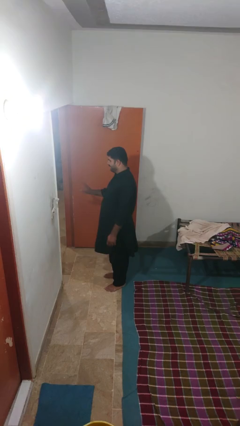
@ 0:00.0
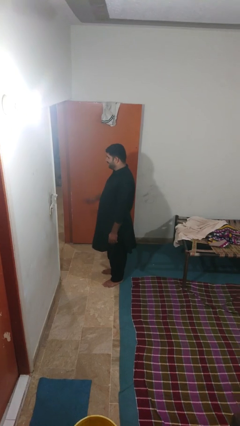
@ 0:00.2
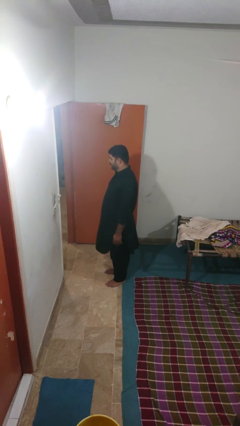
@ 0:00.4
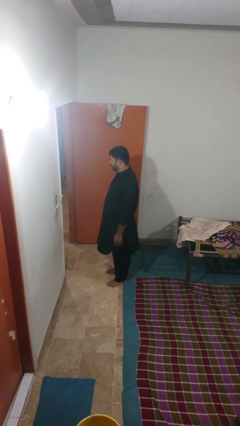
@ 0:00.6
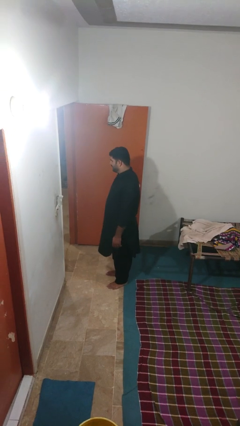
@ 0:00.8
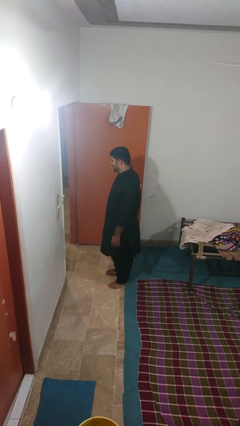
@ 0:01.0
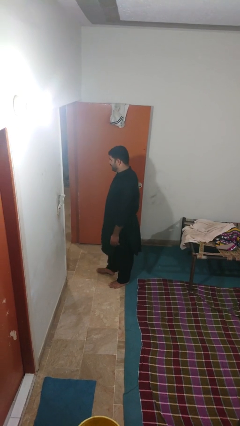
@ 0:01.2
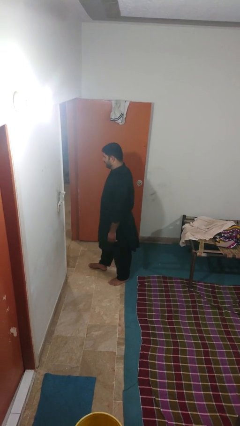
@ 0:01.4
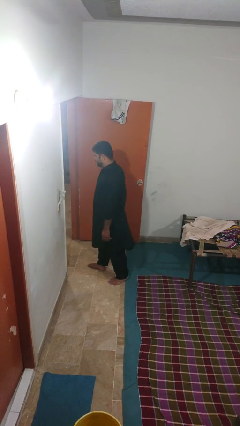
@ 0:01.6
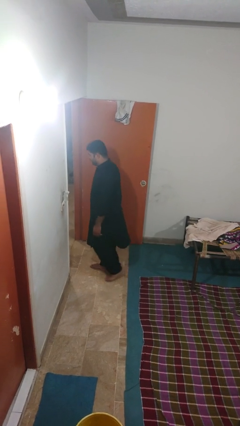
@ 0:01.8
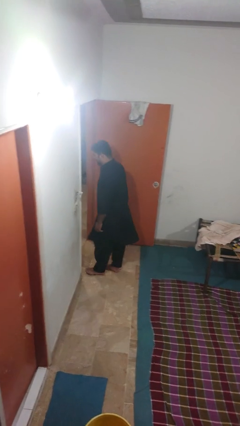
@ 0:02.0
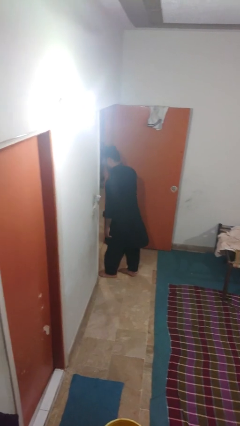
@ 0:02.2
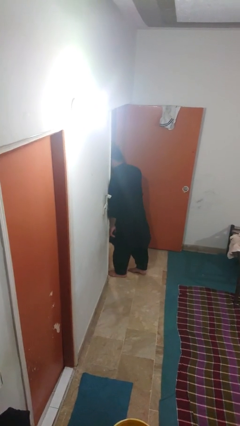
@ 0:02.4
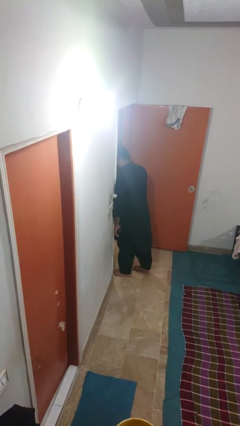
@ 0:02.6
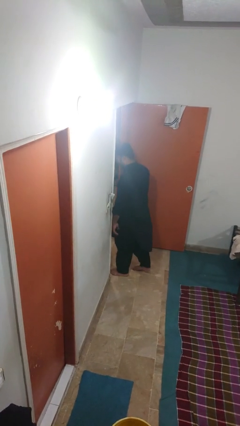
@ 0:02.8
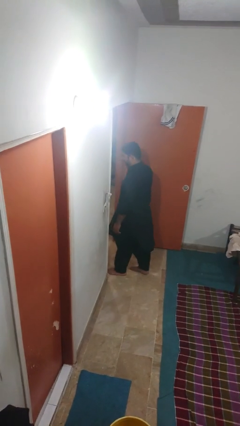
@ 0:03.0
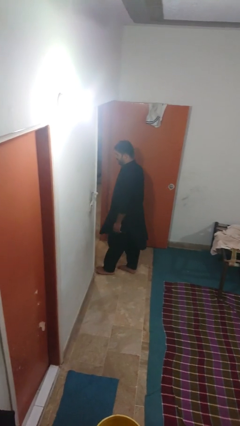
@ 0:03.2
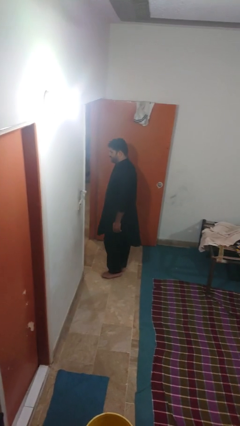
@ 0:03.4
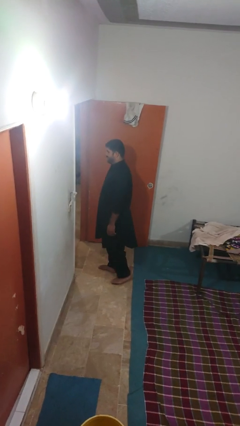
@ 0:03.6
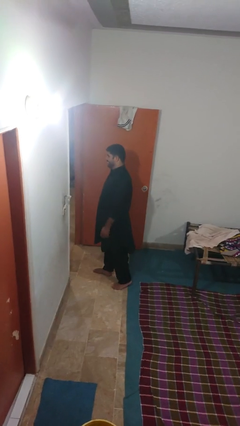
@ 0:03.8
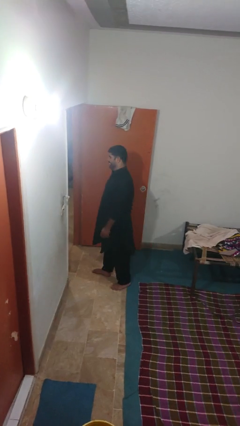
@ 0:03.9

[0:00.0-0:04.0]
person bumps into wall

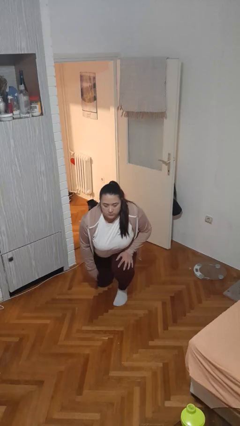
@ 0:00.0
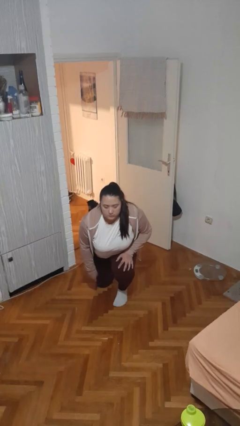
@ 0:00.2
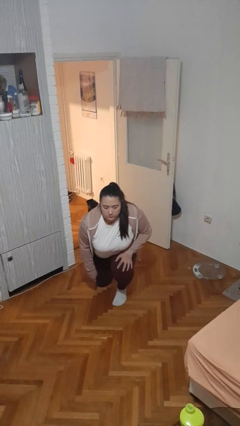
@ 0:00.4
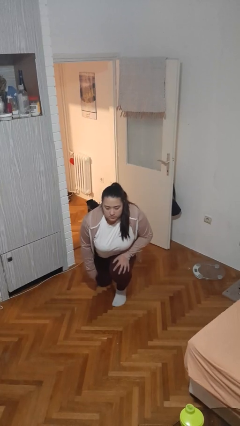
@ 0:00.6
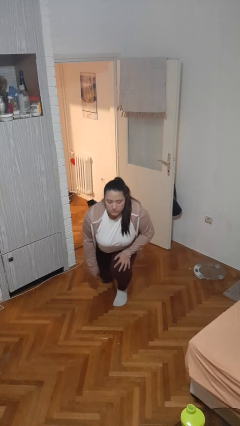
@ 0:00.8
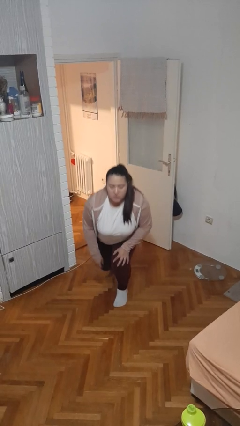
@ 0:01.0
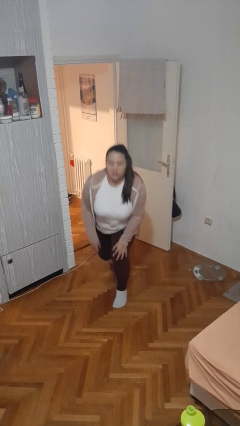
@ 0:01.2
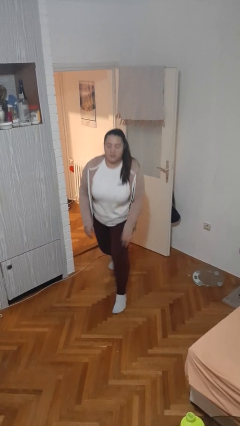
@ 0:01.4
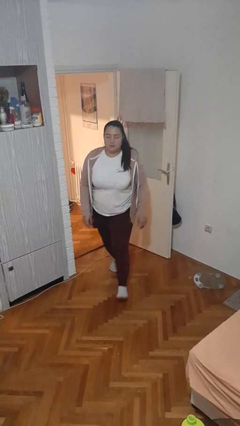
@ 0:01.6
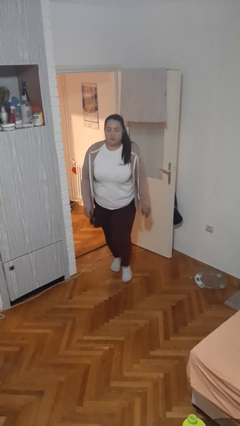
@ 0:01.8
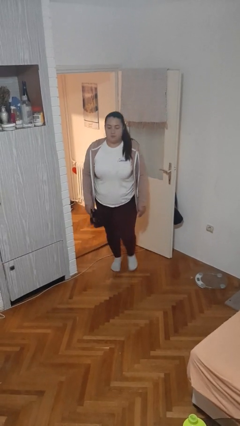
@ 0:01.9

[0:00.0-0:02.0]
person stands up from floor

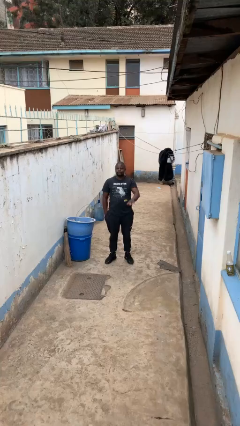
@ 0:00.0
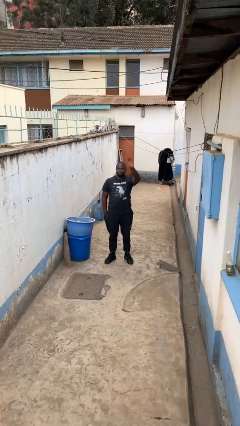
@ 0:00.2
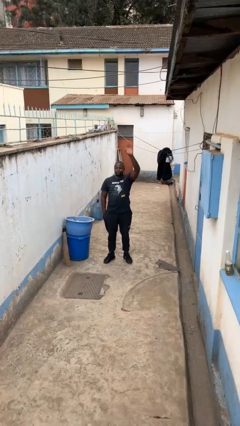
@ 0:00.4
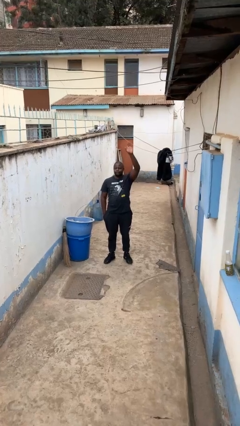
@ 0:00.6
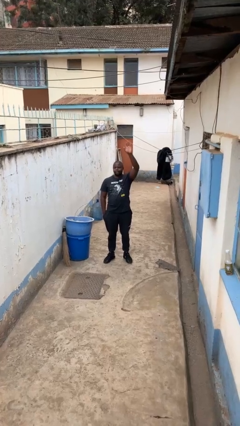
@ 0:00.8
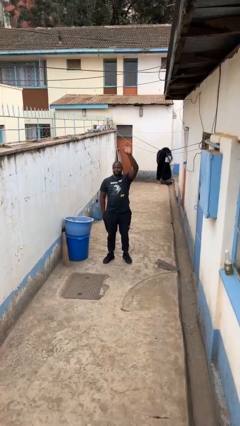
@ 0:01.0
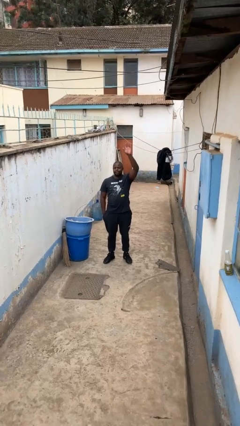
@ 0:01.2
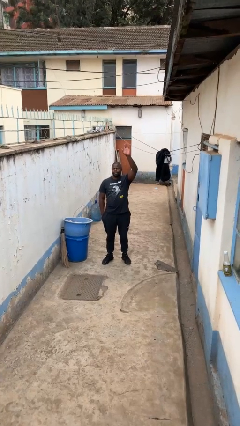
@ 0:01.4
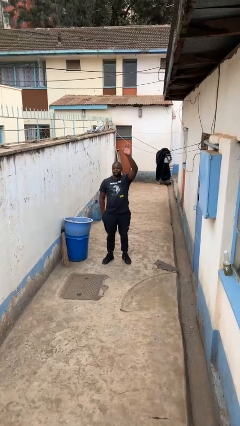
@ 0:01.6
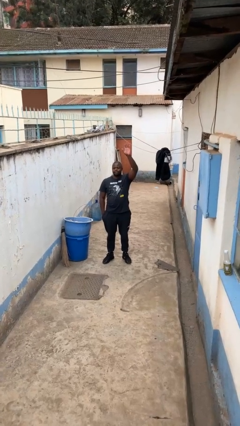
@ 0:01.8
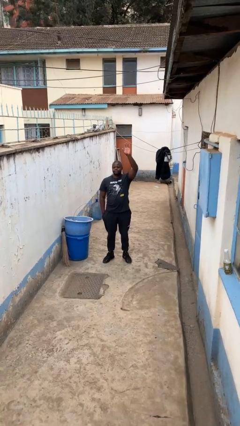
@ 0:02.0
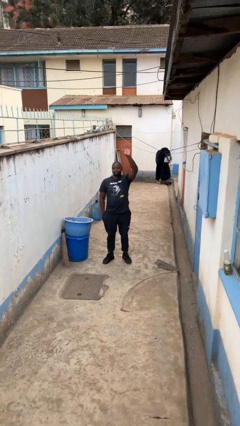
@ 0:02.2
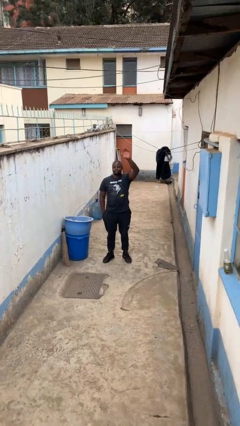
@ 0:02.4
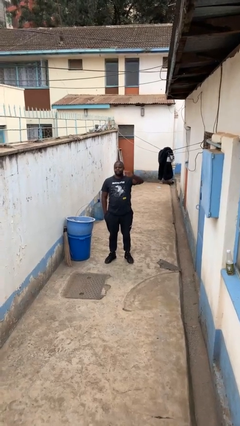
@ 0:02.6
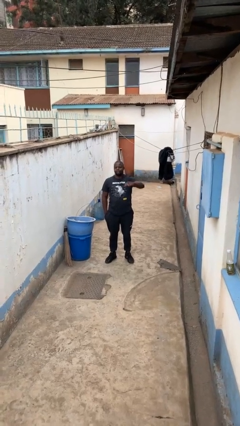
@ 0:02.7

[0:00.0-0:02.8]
person gestures raise hand

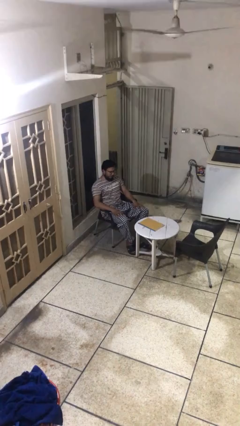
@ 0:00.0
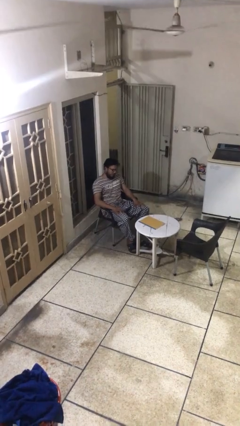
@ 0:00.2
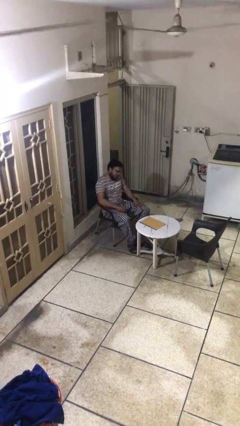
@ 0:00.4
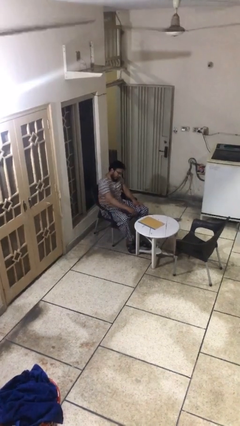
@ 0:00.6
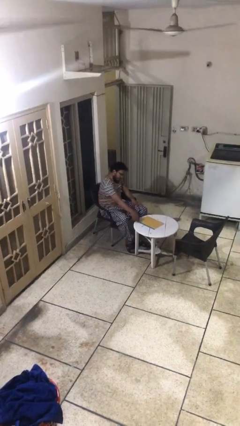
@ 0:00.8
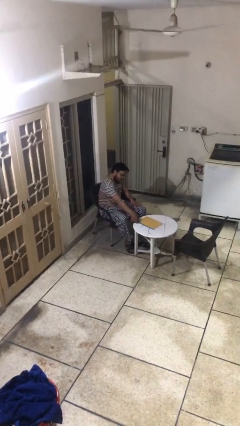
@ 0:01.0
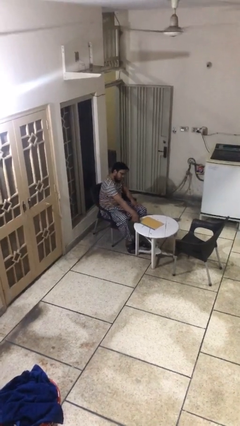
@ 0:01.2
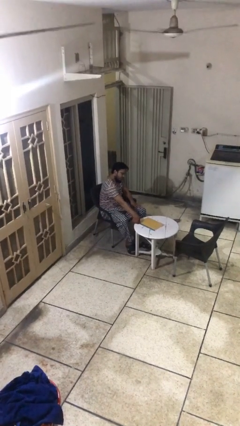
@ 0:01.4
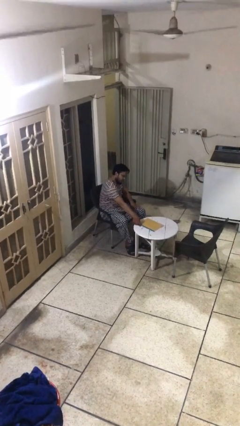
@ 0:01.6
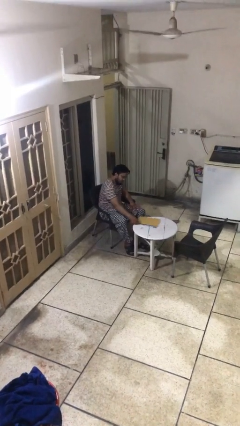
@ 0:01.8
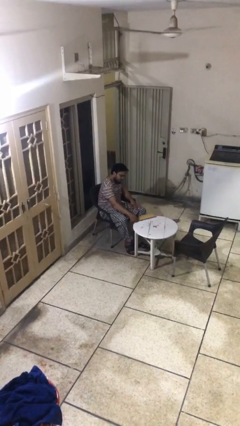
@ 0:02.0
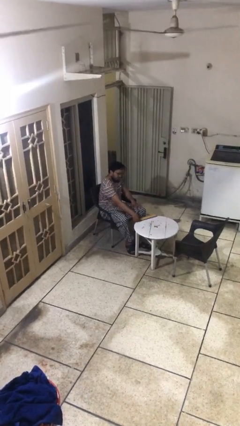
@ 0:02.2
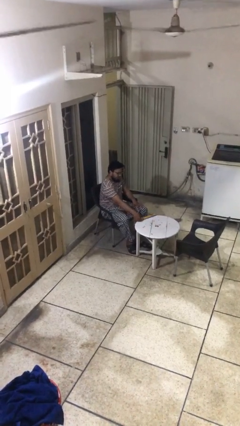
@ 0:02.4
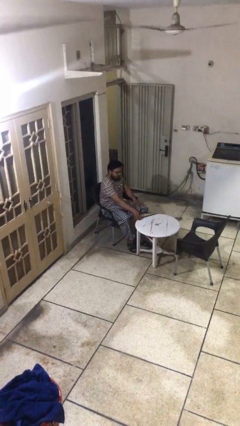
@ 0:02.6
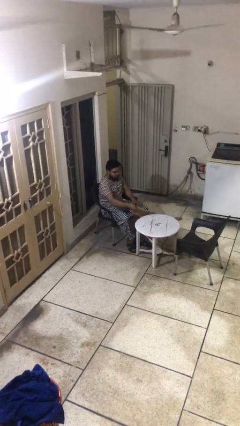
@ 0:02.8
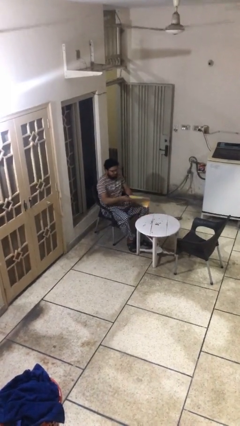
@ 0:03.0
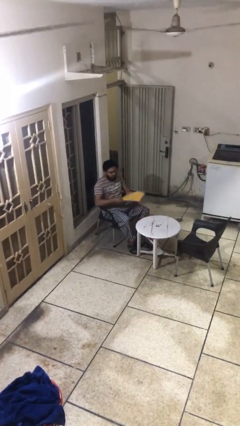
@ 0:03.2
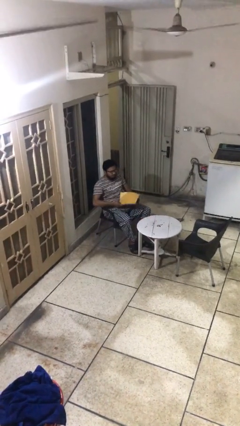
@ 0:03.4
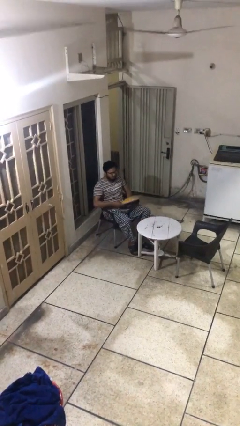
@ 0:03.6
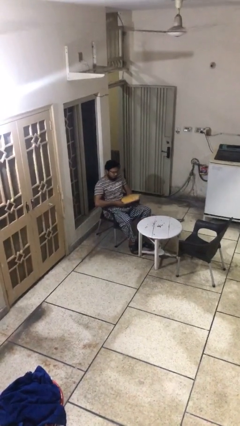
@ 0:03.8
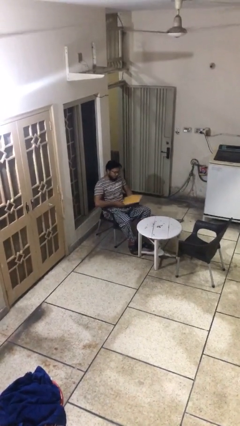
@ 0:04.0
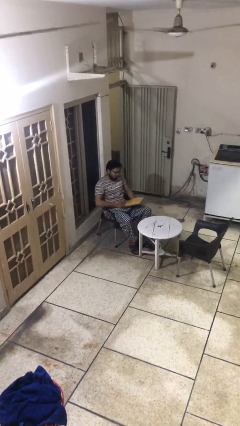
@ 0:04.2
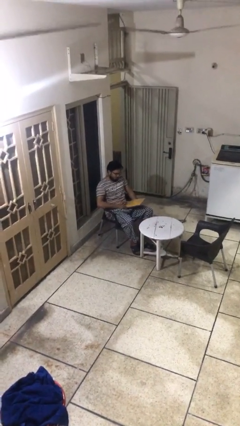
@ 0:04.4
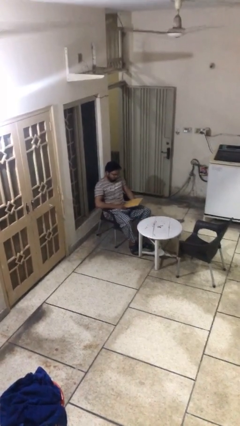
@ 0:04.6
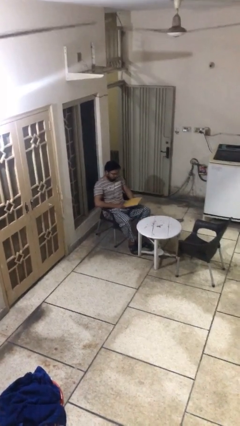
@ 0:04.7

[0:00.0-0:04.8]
person picks up object from table

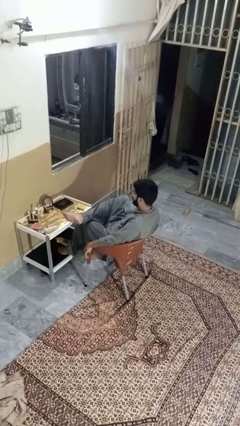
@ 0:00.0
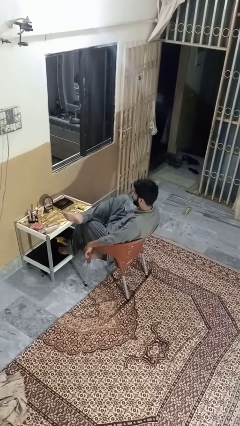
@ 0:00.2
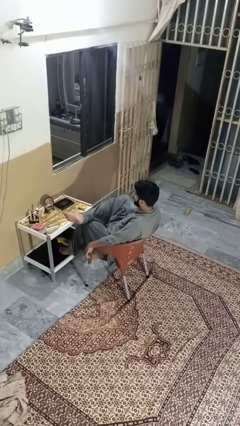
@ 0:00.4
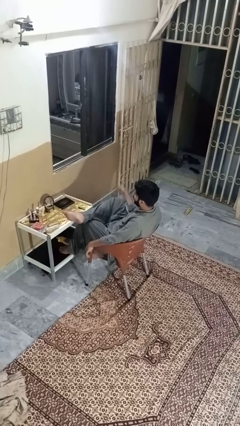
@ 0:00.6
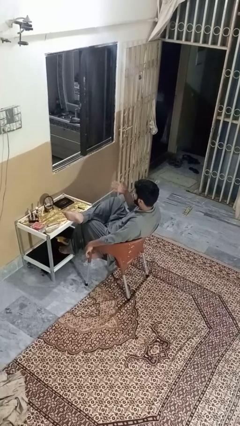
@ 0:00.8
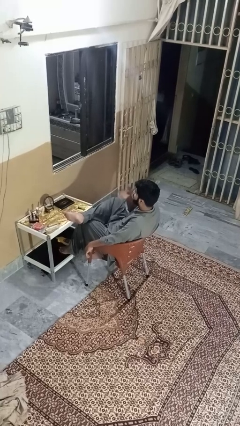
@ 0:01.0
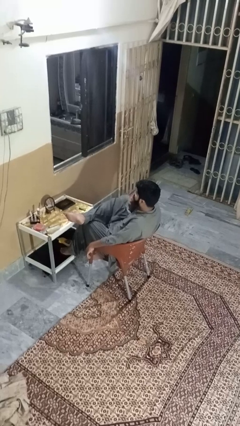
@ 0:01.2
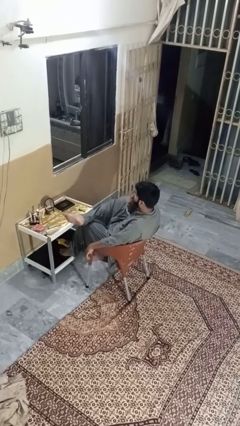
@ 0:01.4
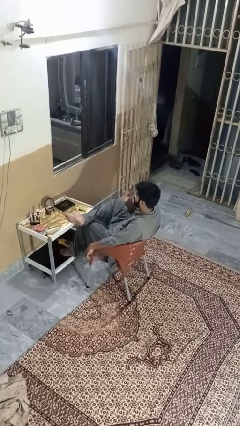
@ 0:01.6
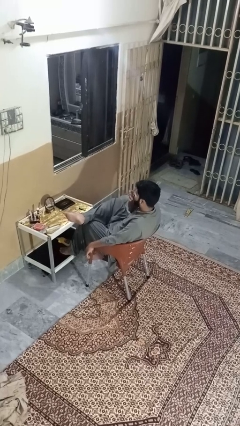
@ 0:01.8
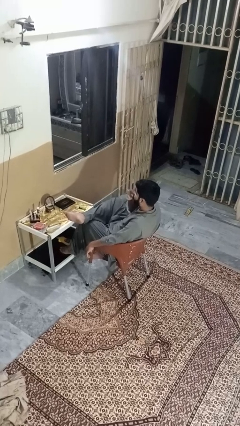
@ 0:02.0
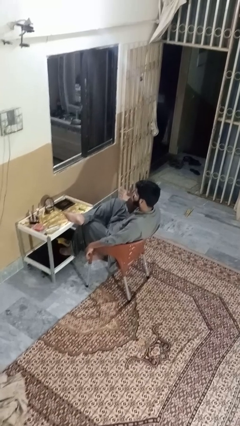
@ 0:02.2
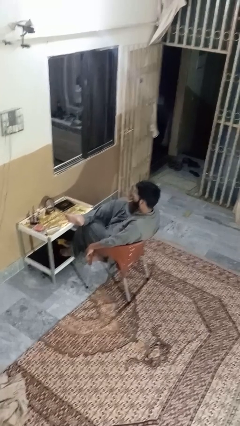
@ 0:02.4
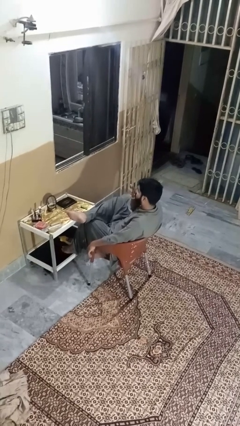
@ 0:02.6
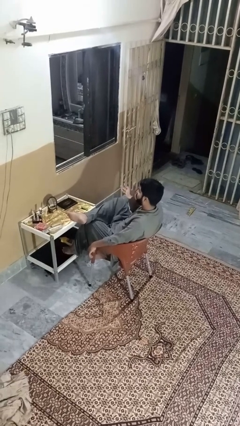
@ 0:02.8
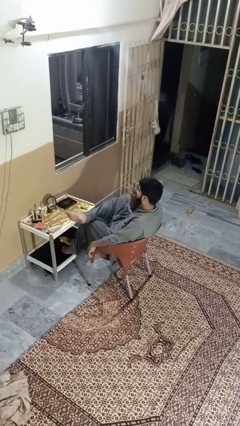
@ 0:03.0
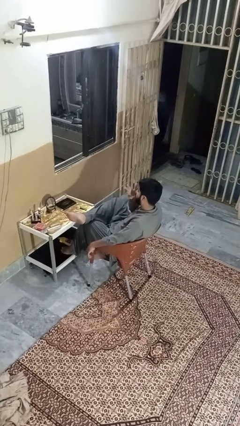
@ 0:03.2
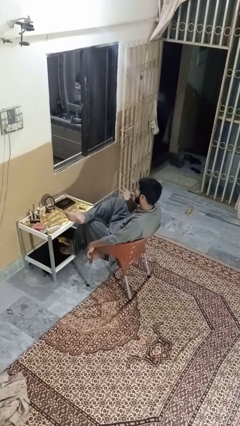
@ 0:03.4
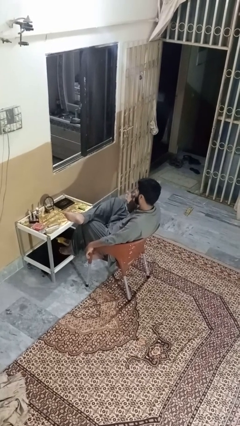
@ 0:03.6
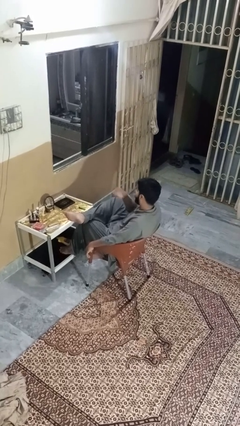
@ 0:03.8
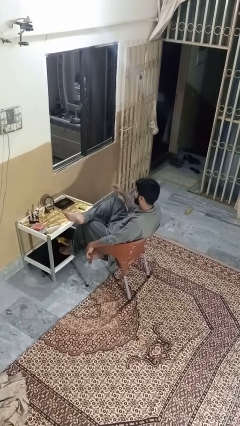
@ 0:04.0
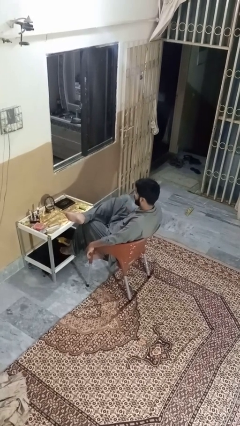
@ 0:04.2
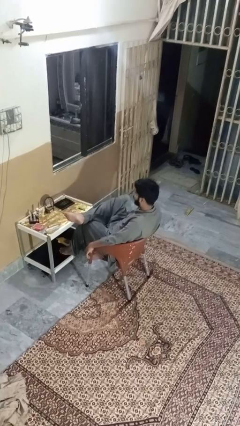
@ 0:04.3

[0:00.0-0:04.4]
person licks fingers
